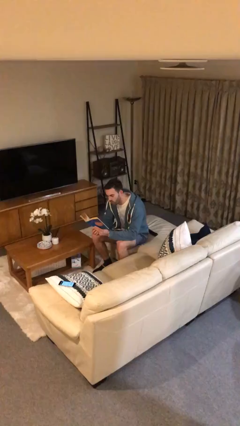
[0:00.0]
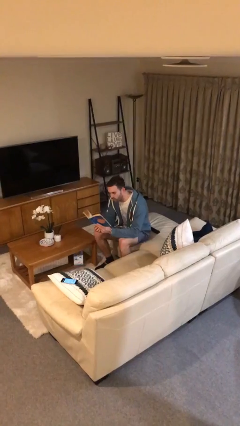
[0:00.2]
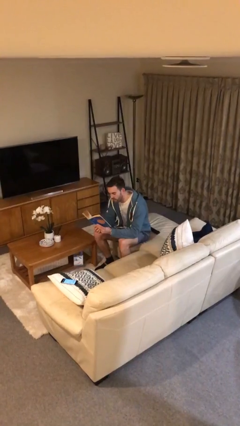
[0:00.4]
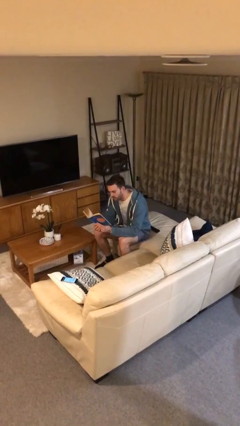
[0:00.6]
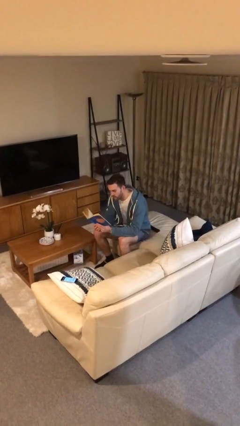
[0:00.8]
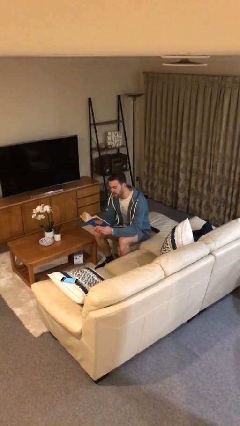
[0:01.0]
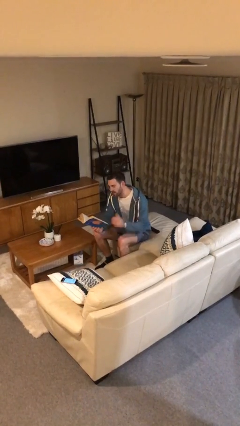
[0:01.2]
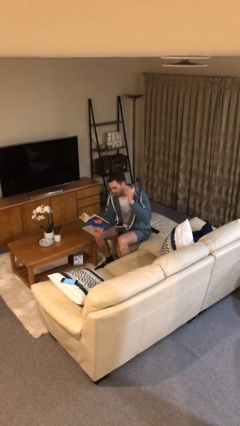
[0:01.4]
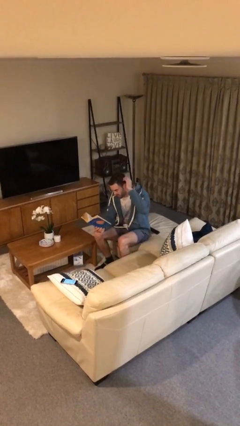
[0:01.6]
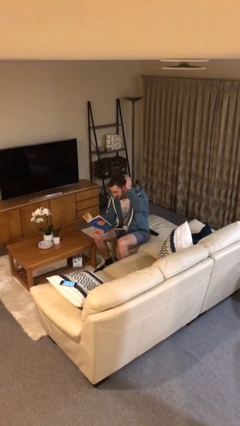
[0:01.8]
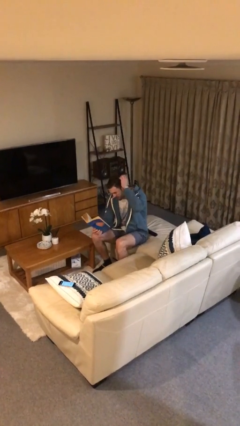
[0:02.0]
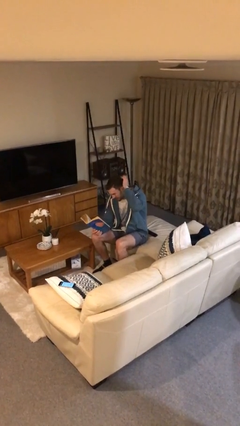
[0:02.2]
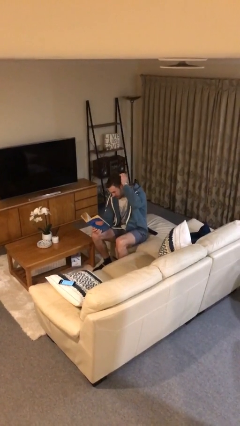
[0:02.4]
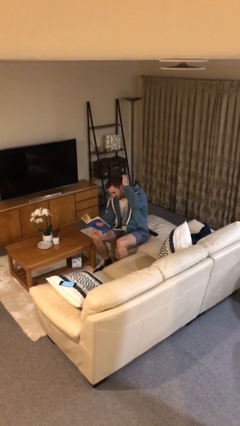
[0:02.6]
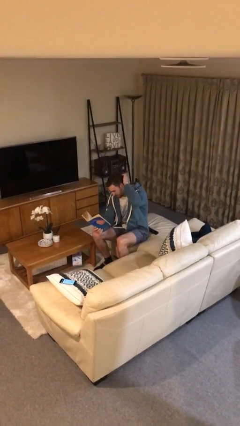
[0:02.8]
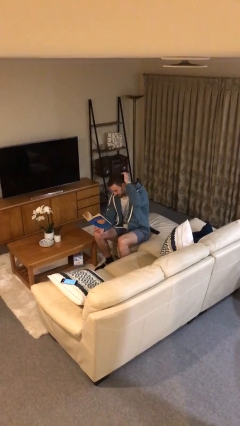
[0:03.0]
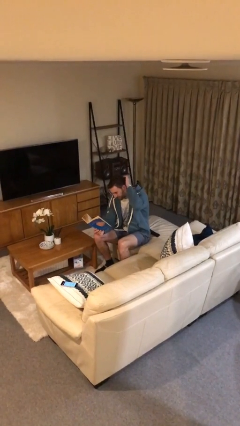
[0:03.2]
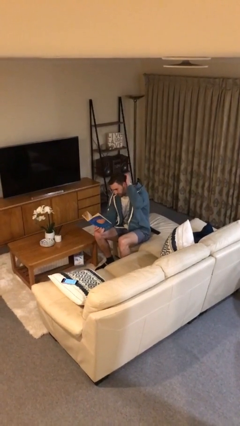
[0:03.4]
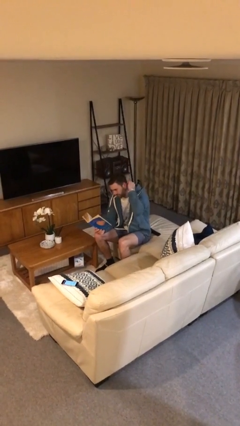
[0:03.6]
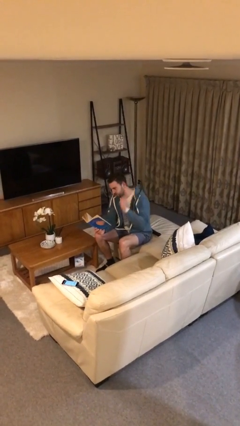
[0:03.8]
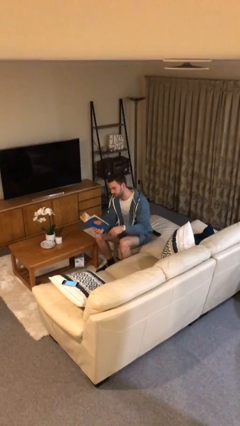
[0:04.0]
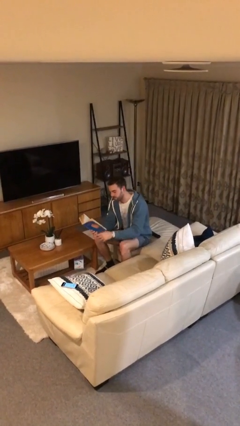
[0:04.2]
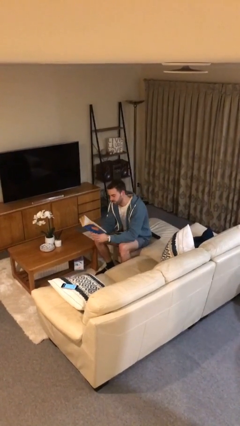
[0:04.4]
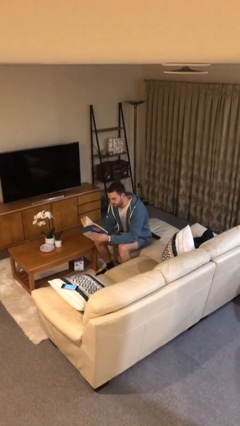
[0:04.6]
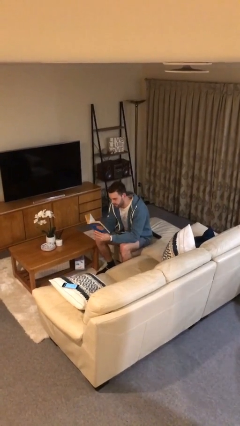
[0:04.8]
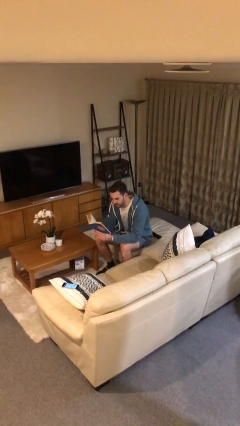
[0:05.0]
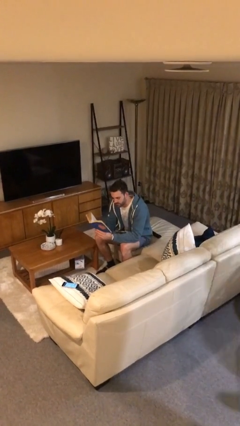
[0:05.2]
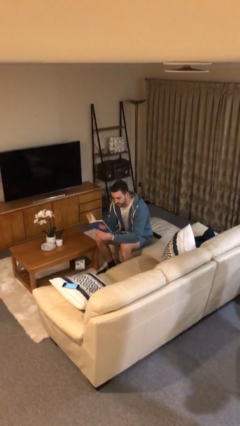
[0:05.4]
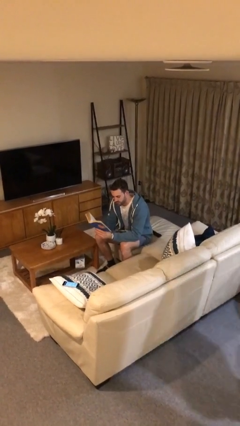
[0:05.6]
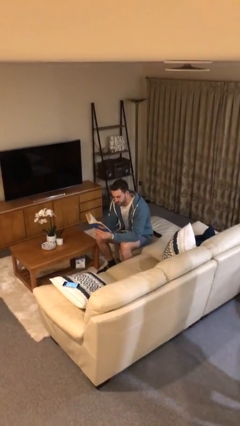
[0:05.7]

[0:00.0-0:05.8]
person reads document

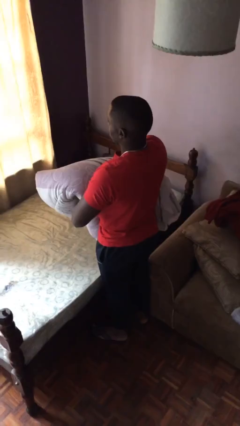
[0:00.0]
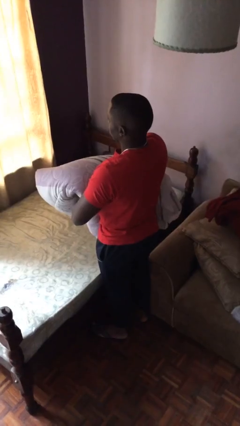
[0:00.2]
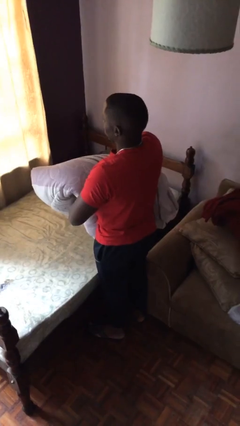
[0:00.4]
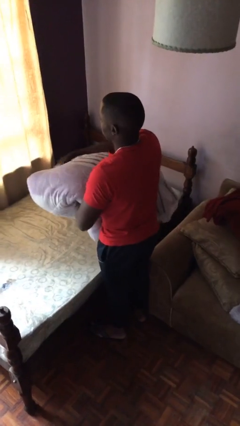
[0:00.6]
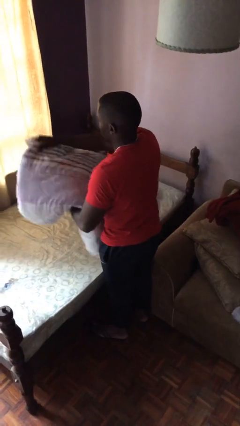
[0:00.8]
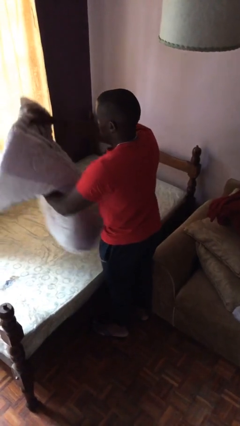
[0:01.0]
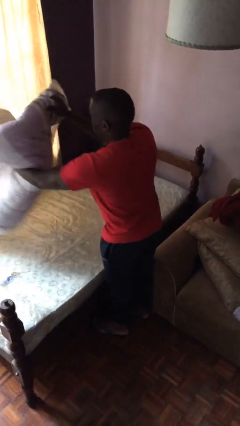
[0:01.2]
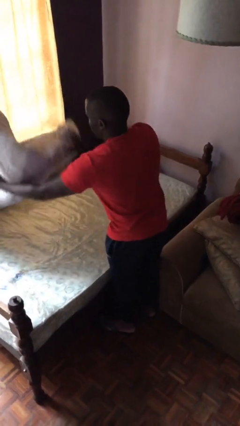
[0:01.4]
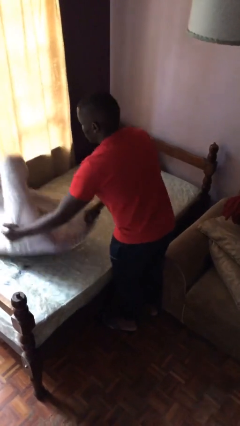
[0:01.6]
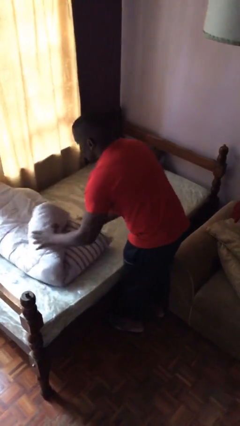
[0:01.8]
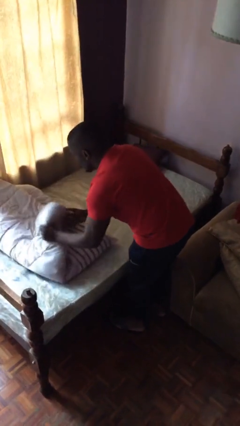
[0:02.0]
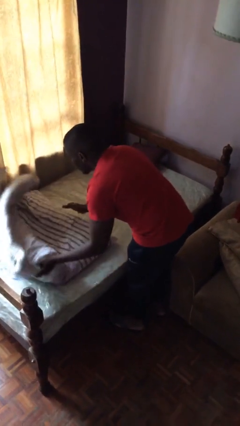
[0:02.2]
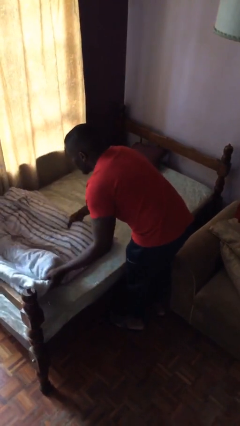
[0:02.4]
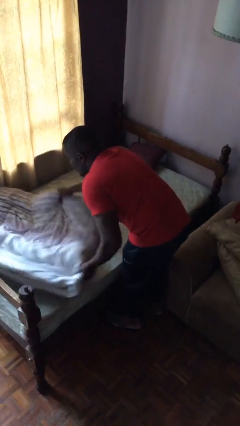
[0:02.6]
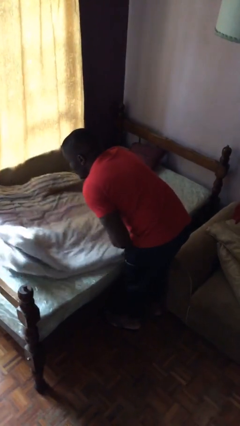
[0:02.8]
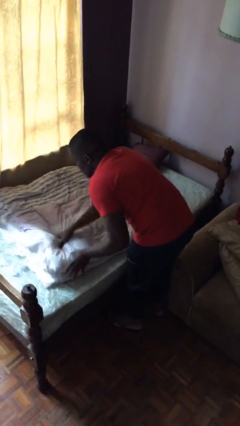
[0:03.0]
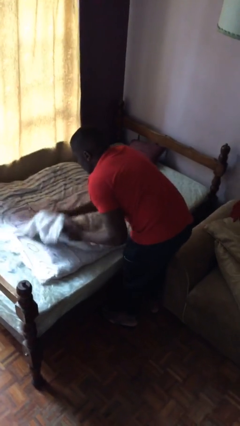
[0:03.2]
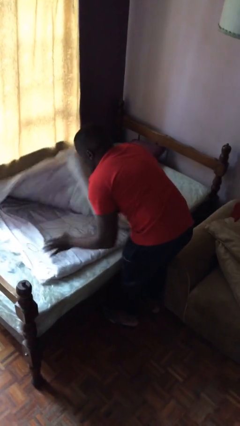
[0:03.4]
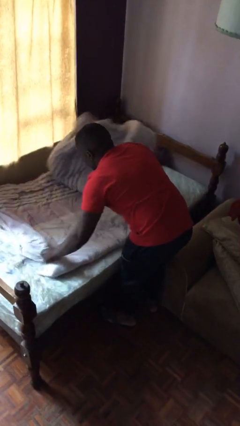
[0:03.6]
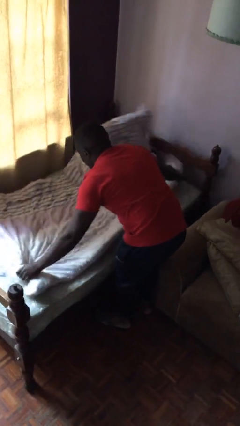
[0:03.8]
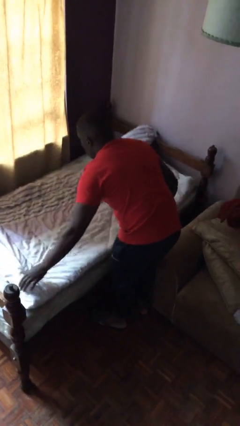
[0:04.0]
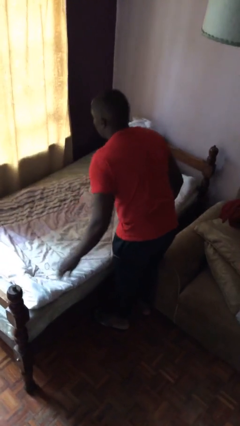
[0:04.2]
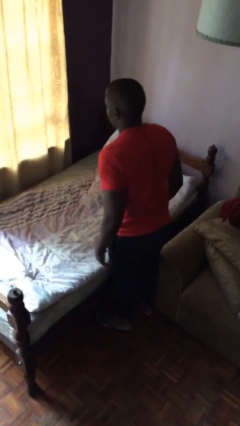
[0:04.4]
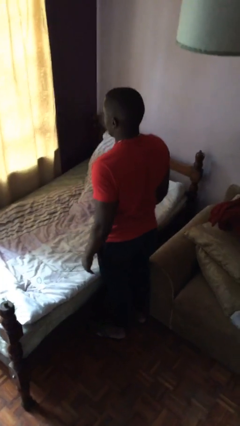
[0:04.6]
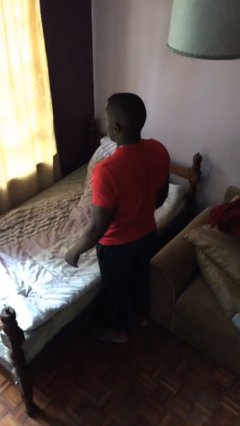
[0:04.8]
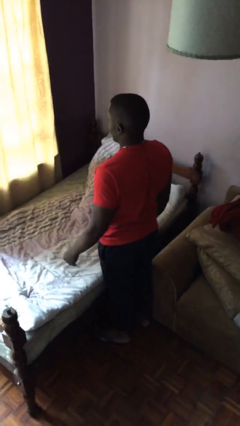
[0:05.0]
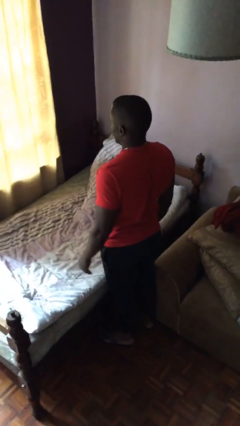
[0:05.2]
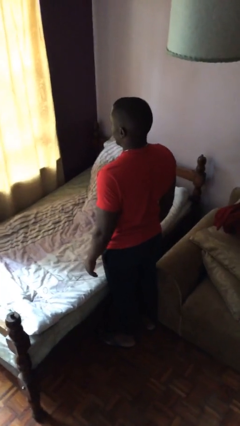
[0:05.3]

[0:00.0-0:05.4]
person unfolds blanket

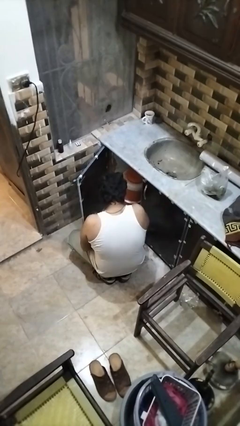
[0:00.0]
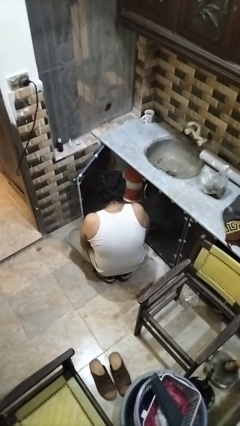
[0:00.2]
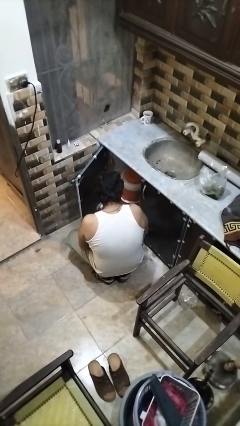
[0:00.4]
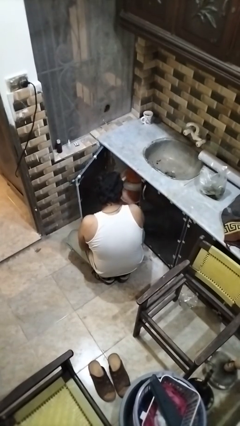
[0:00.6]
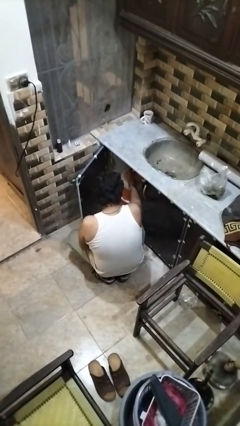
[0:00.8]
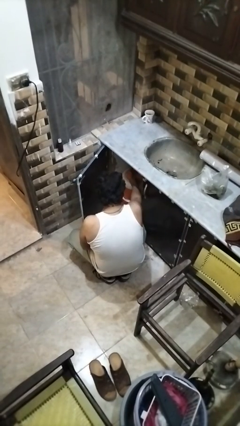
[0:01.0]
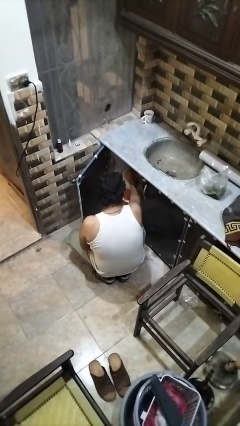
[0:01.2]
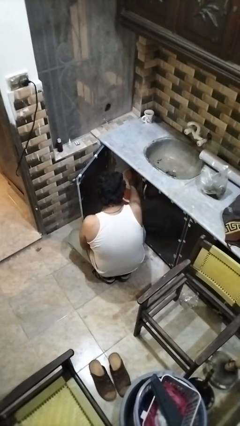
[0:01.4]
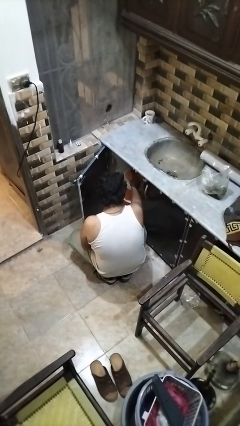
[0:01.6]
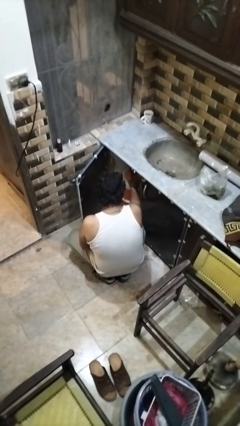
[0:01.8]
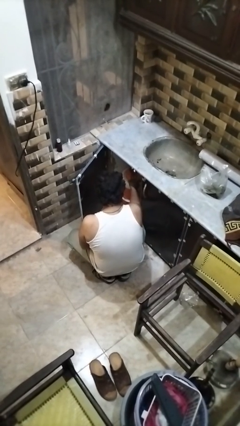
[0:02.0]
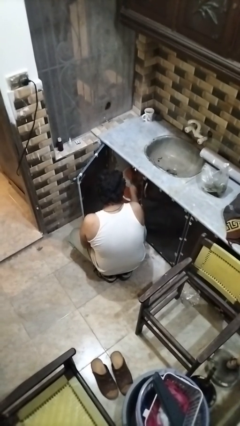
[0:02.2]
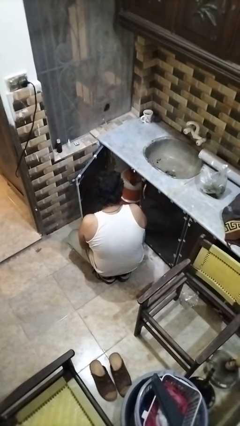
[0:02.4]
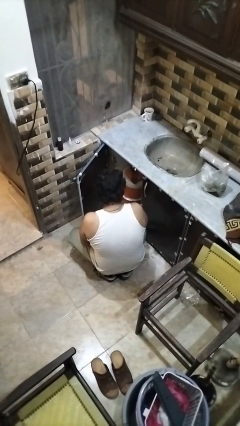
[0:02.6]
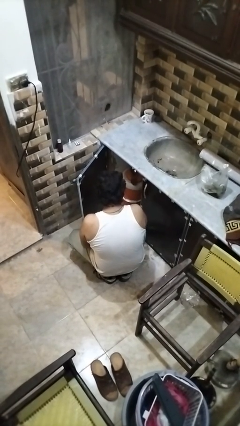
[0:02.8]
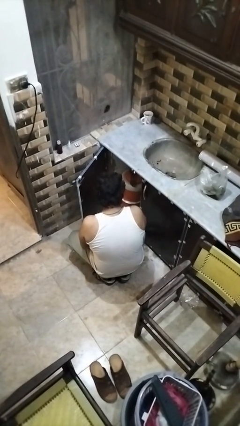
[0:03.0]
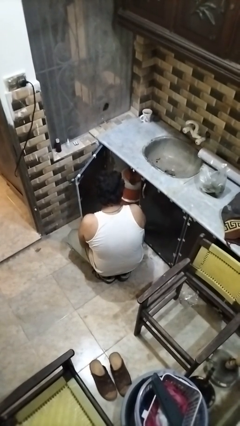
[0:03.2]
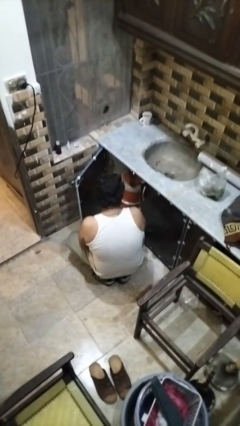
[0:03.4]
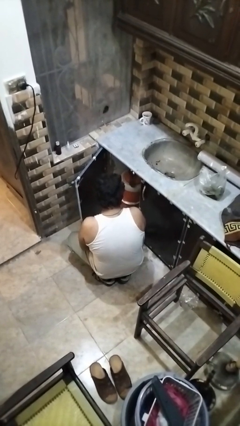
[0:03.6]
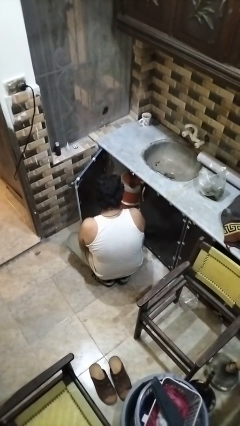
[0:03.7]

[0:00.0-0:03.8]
person puts object into kitchen drawer

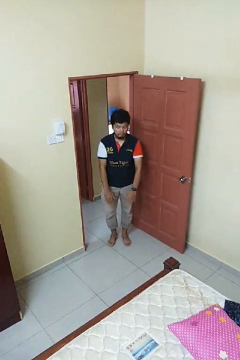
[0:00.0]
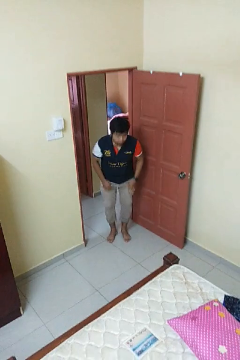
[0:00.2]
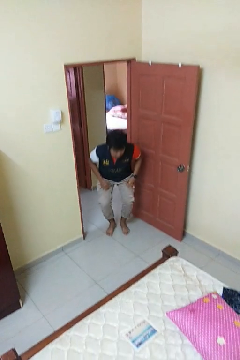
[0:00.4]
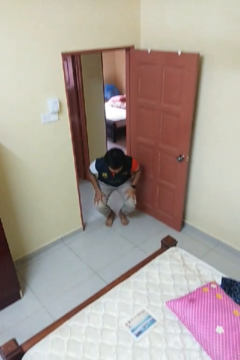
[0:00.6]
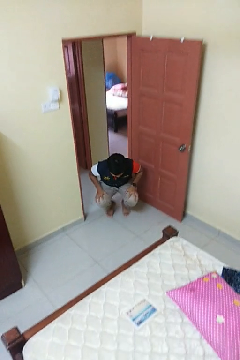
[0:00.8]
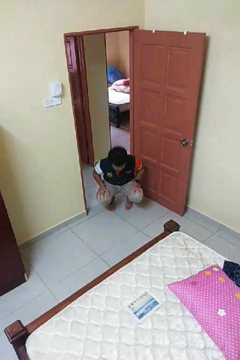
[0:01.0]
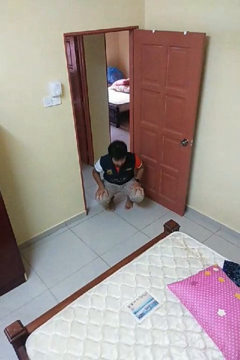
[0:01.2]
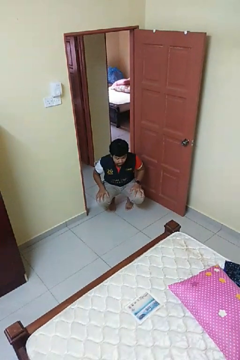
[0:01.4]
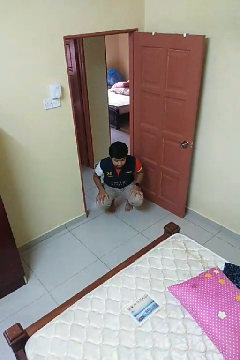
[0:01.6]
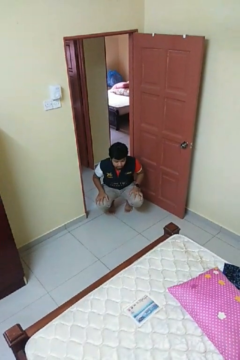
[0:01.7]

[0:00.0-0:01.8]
person squats

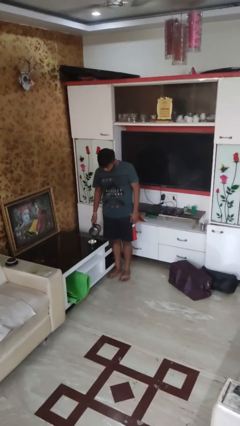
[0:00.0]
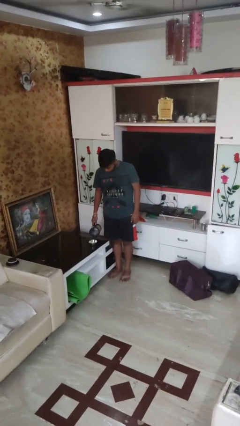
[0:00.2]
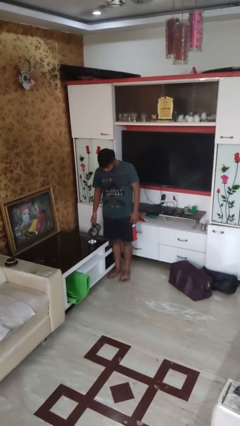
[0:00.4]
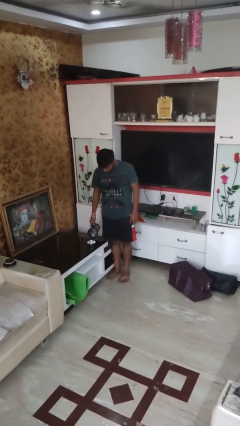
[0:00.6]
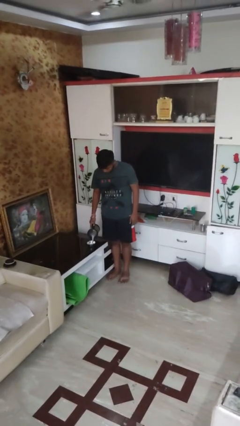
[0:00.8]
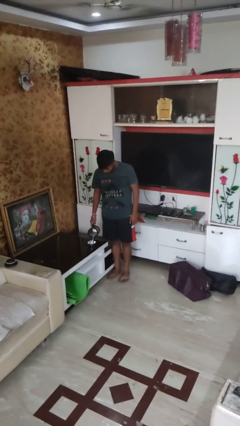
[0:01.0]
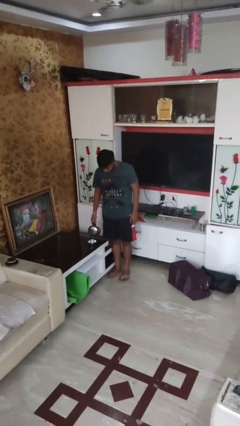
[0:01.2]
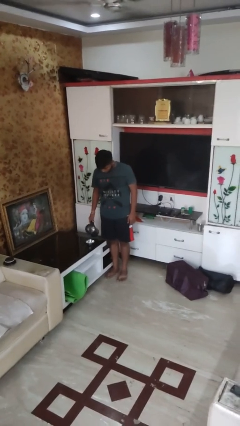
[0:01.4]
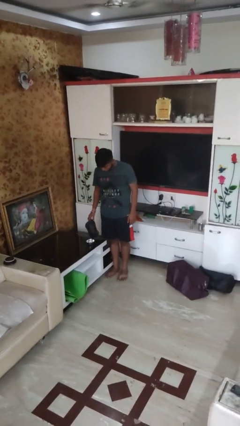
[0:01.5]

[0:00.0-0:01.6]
person pours into bowl
